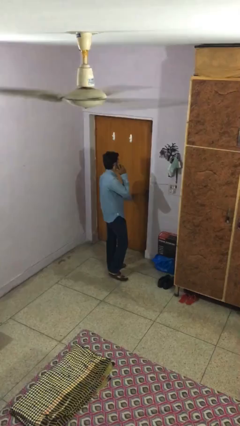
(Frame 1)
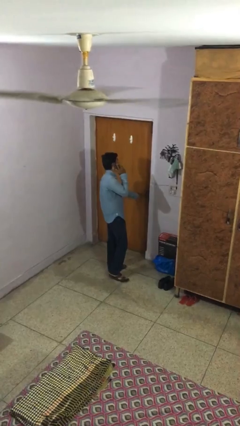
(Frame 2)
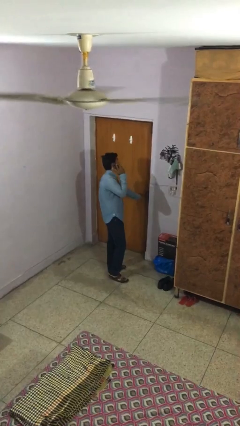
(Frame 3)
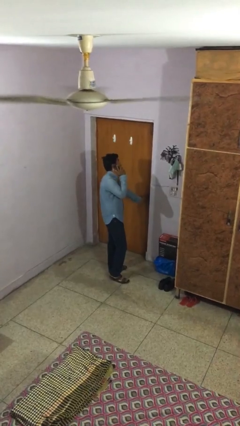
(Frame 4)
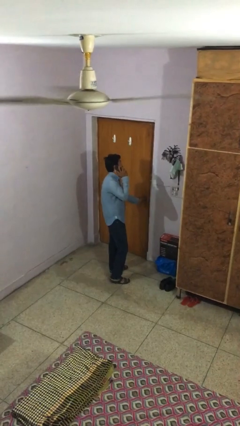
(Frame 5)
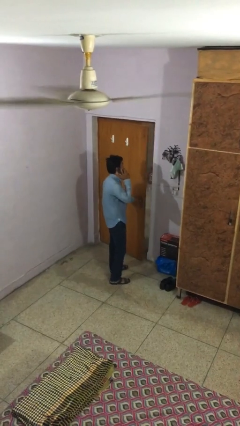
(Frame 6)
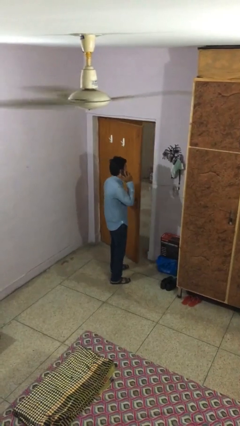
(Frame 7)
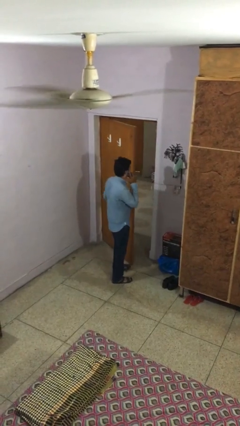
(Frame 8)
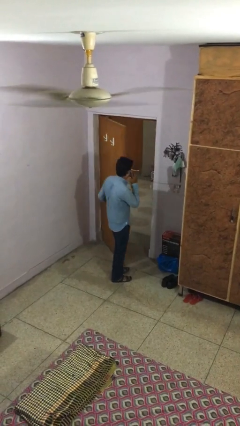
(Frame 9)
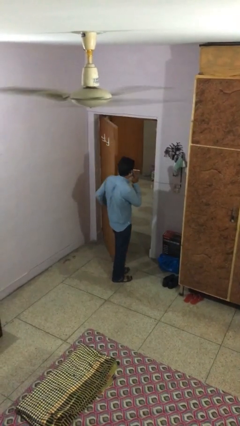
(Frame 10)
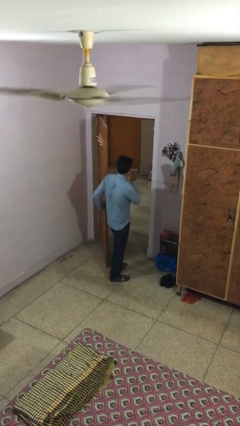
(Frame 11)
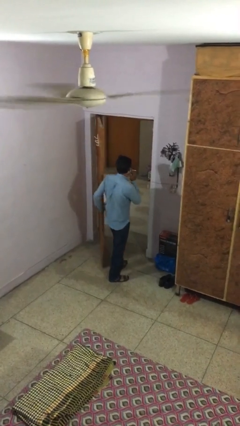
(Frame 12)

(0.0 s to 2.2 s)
person opens facility door

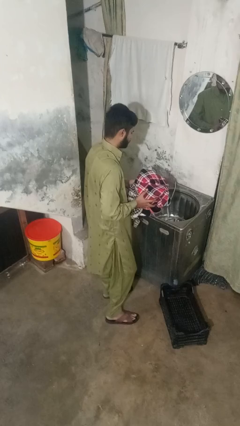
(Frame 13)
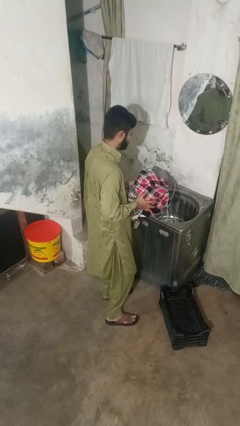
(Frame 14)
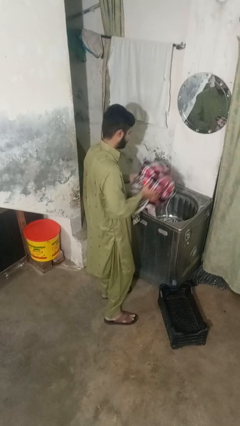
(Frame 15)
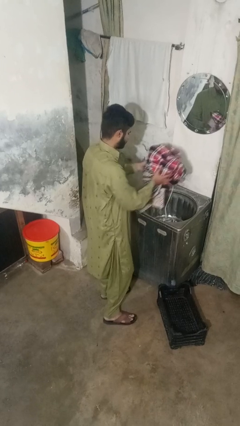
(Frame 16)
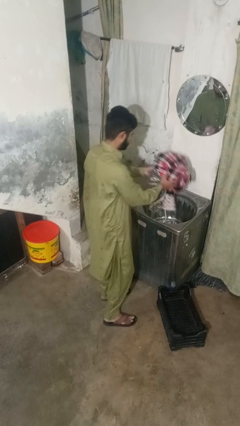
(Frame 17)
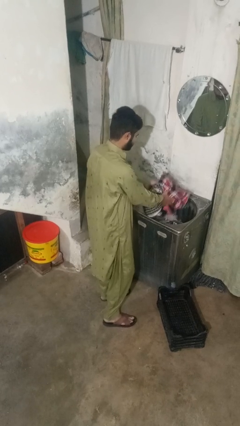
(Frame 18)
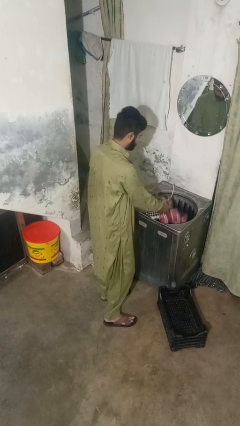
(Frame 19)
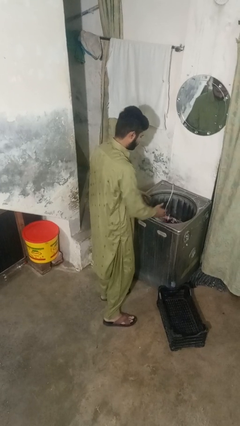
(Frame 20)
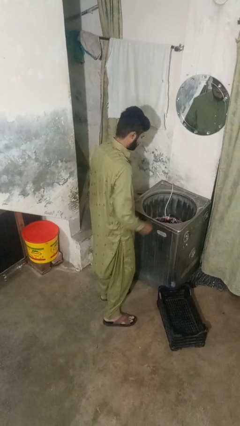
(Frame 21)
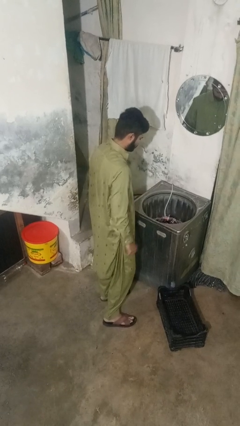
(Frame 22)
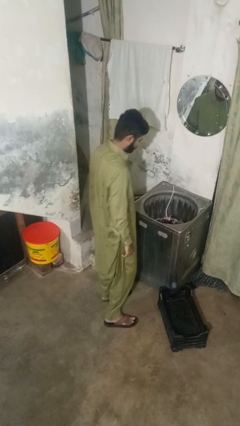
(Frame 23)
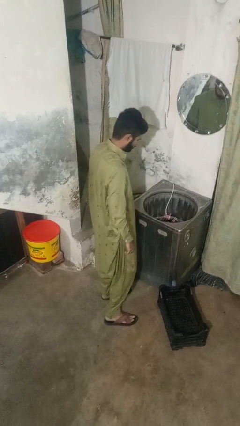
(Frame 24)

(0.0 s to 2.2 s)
person loads clotheswasher

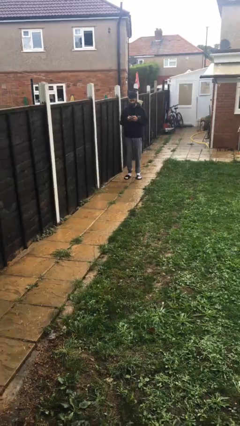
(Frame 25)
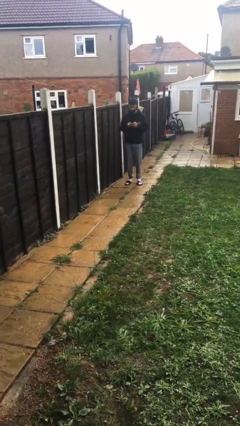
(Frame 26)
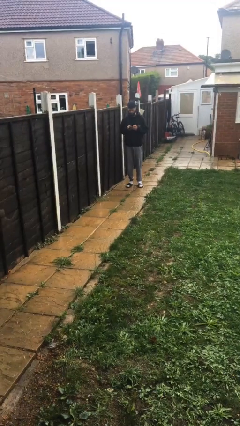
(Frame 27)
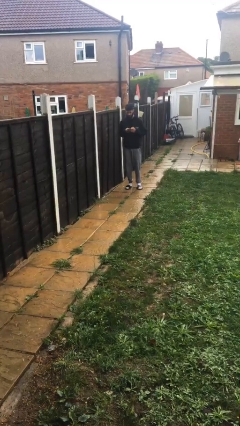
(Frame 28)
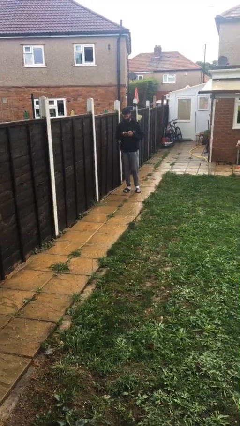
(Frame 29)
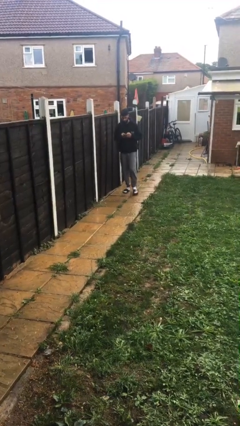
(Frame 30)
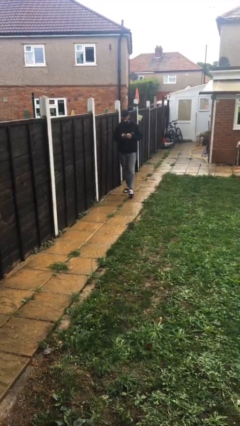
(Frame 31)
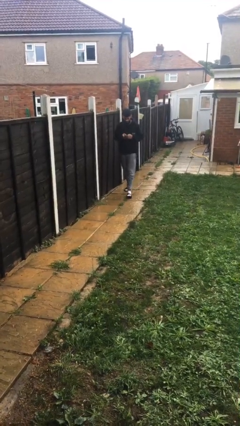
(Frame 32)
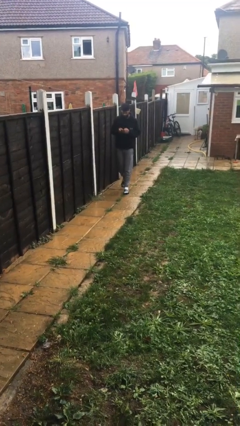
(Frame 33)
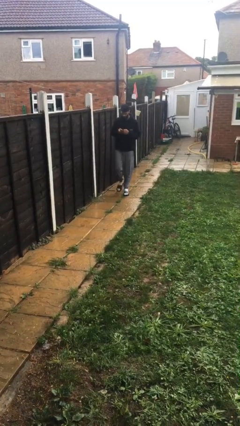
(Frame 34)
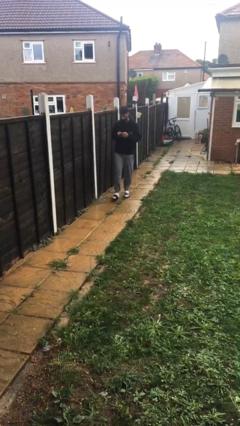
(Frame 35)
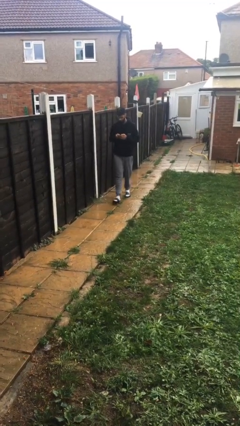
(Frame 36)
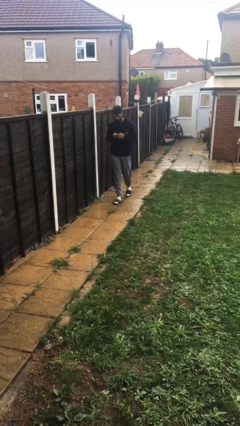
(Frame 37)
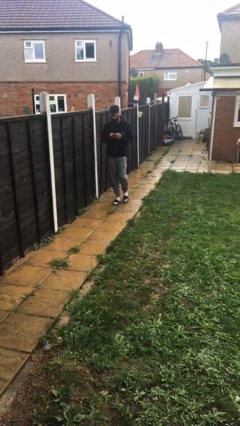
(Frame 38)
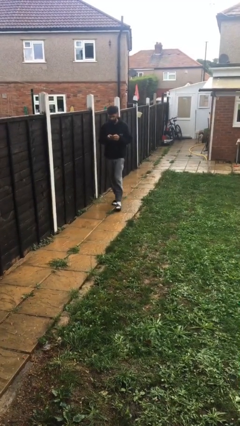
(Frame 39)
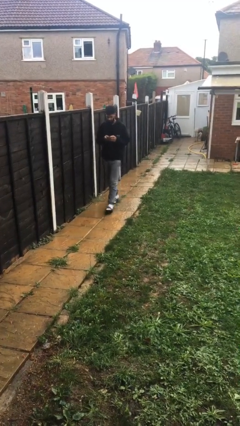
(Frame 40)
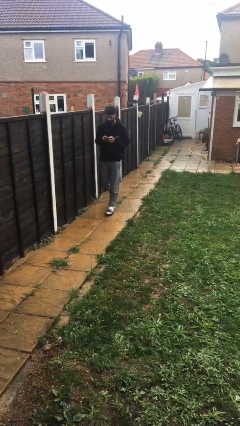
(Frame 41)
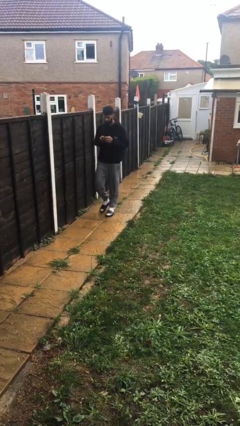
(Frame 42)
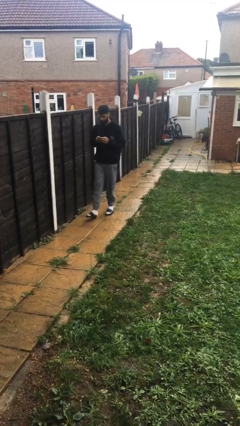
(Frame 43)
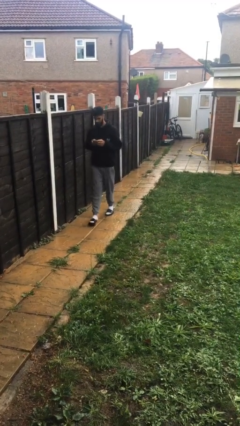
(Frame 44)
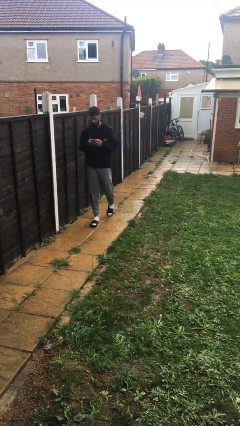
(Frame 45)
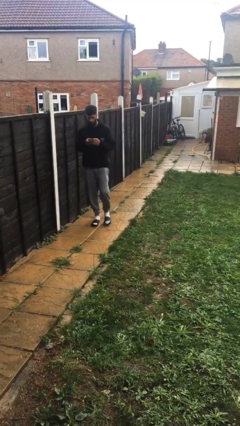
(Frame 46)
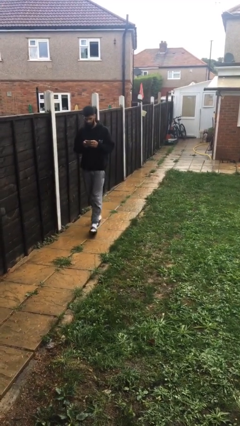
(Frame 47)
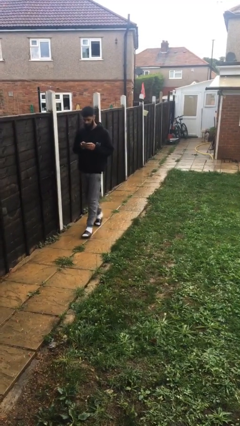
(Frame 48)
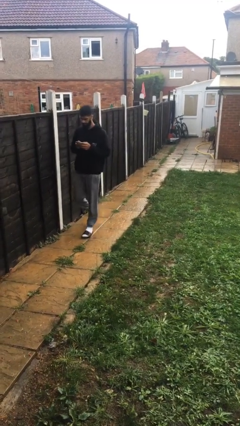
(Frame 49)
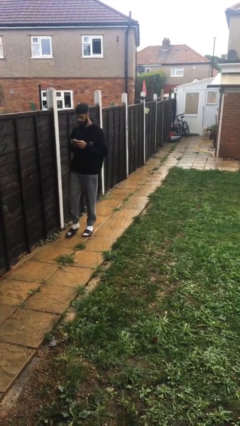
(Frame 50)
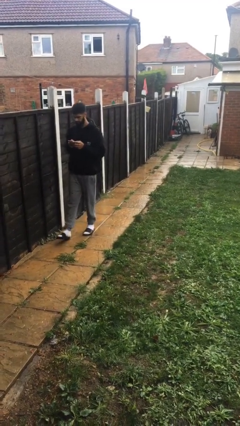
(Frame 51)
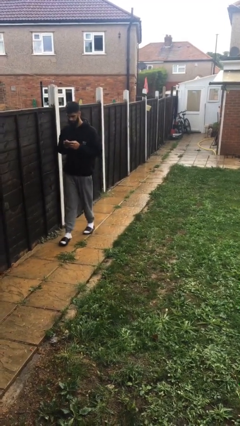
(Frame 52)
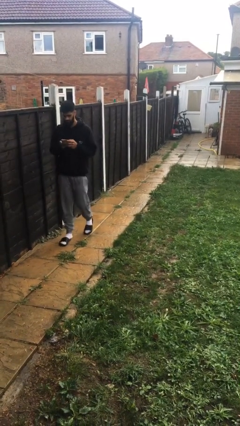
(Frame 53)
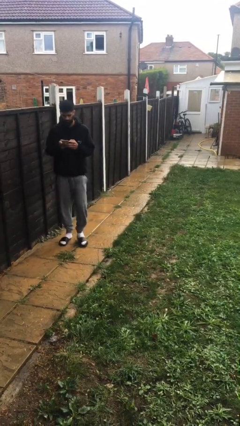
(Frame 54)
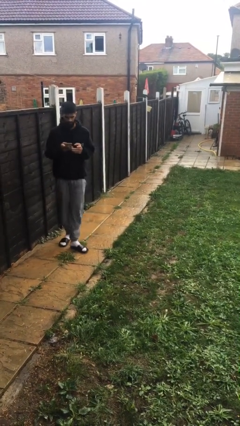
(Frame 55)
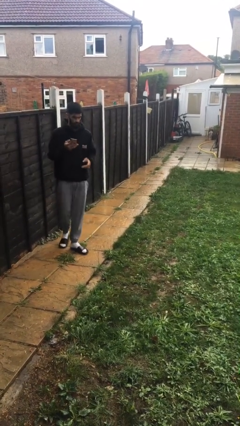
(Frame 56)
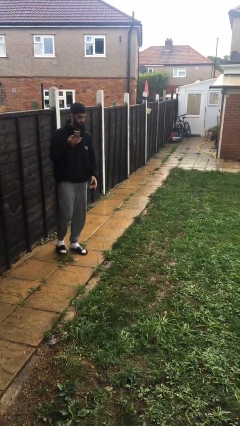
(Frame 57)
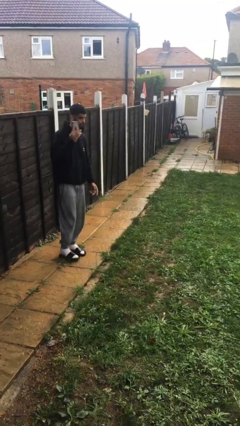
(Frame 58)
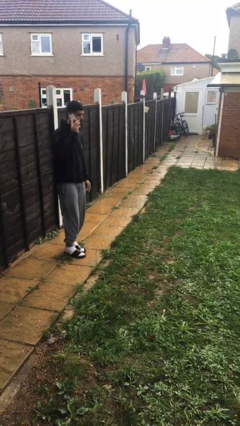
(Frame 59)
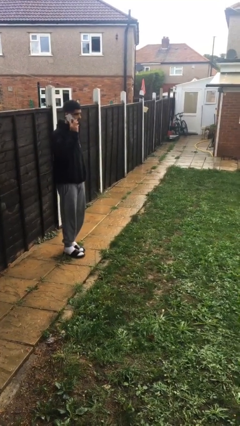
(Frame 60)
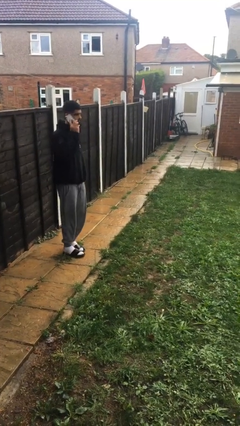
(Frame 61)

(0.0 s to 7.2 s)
person texts on phone

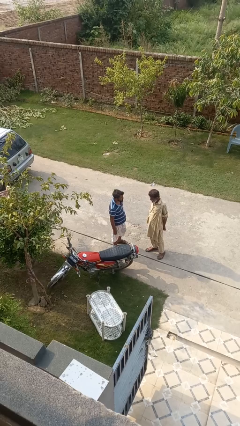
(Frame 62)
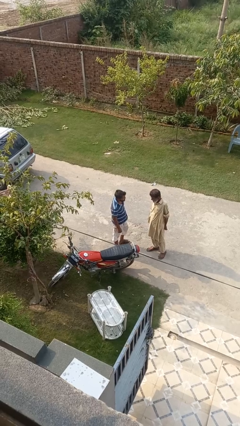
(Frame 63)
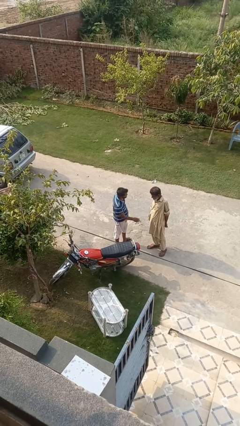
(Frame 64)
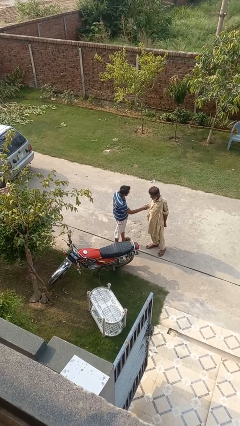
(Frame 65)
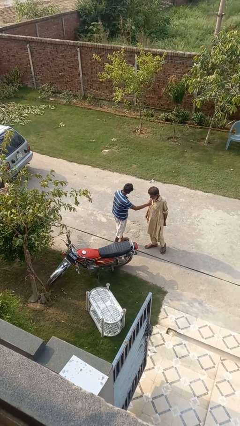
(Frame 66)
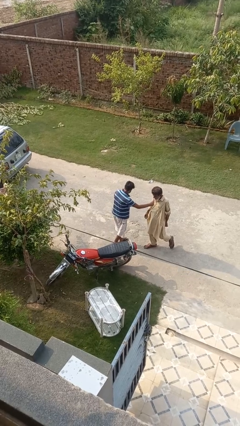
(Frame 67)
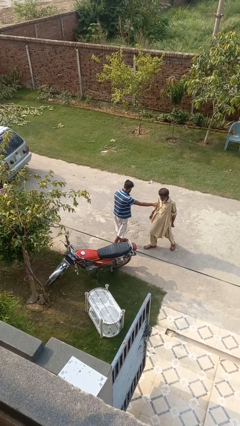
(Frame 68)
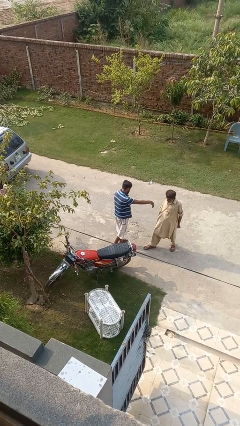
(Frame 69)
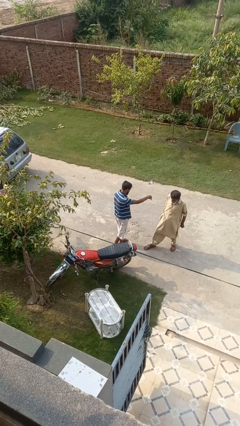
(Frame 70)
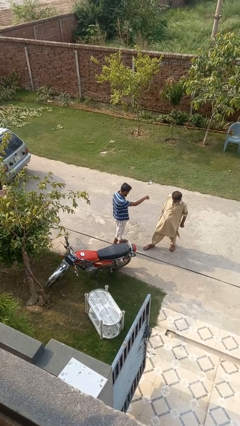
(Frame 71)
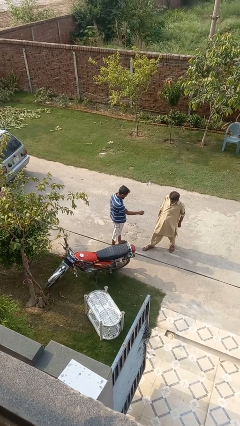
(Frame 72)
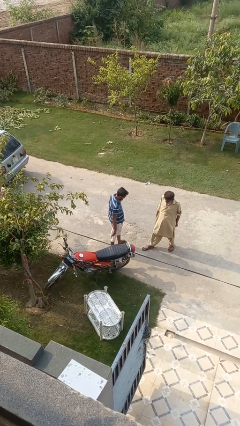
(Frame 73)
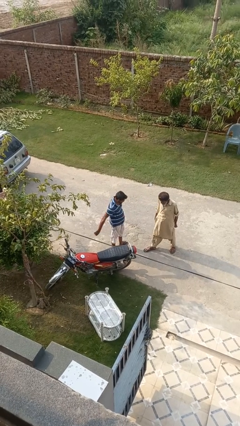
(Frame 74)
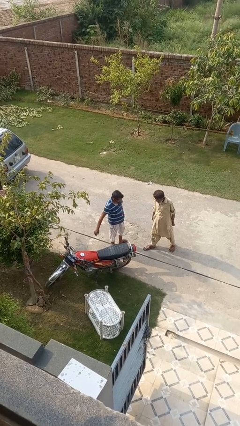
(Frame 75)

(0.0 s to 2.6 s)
person shoves person

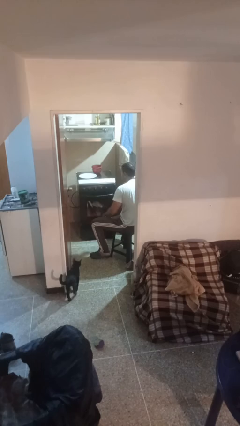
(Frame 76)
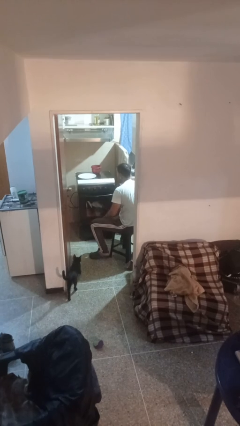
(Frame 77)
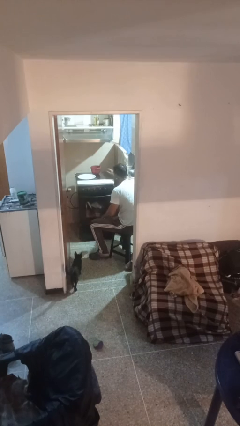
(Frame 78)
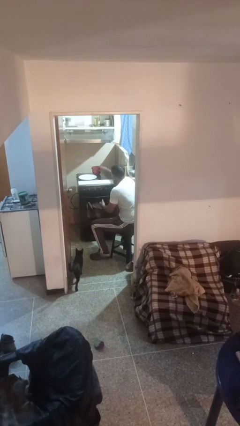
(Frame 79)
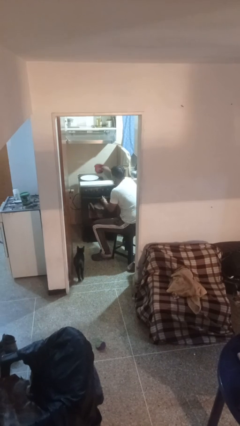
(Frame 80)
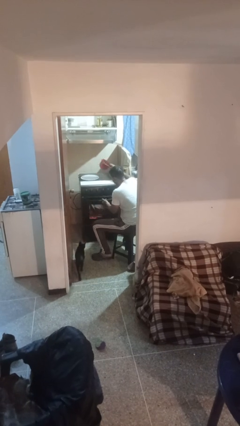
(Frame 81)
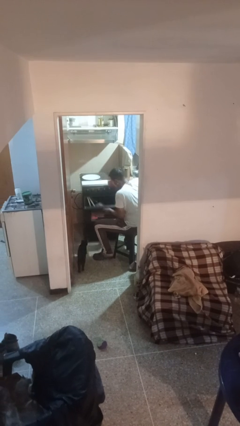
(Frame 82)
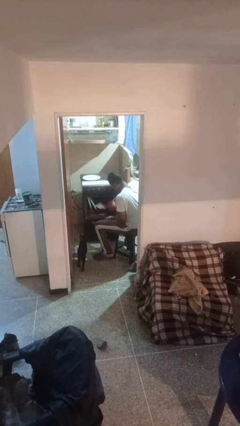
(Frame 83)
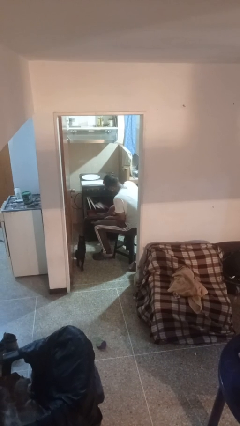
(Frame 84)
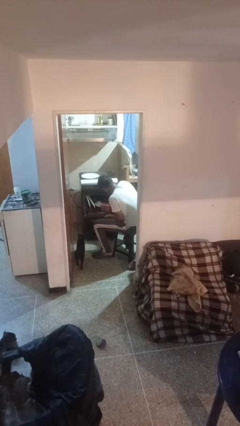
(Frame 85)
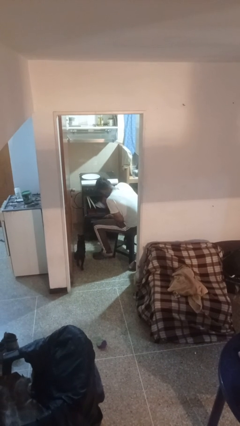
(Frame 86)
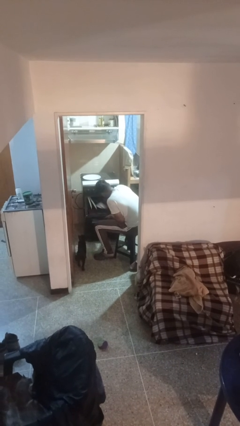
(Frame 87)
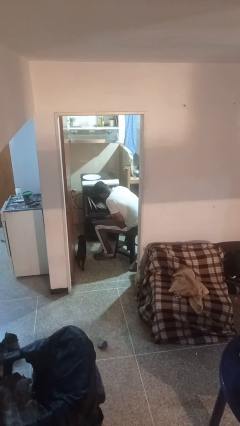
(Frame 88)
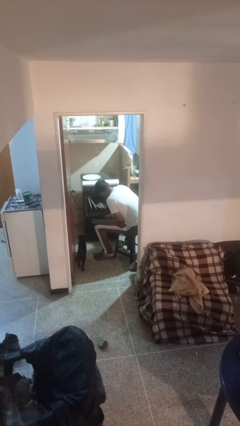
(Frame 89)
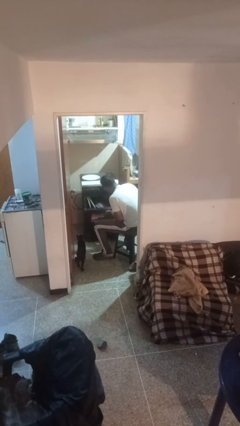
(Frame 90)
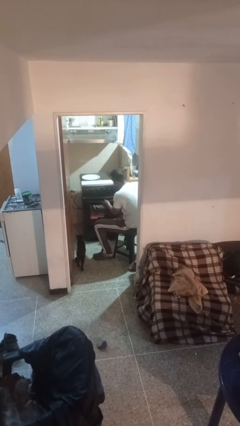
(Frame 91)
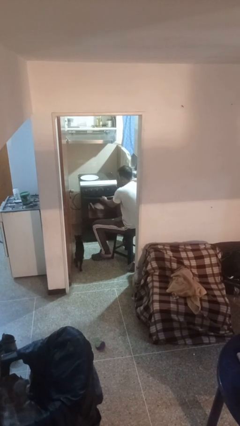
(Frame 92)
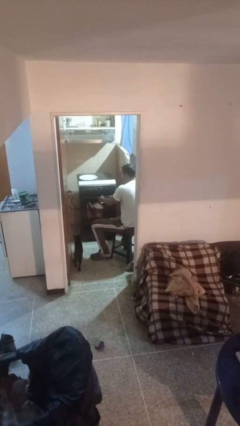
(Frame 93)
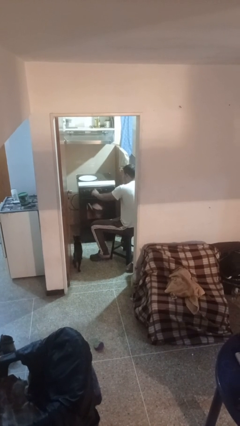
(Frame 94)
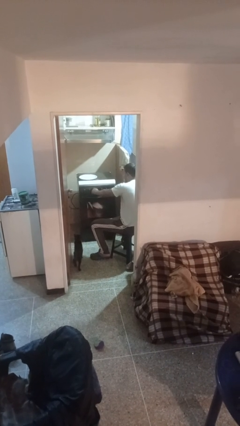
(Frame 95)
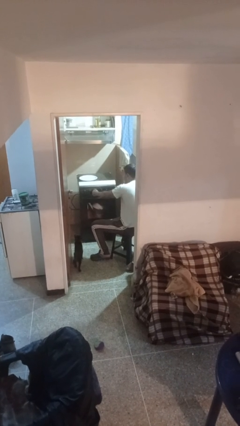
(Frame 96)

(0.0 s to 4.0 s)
person loads dishwasher
